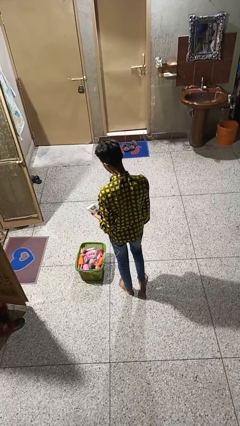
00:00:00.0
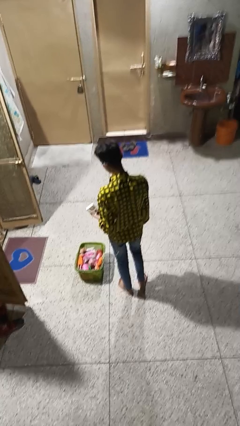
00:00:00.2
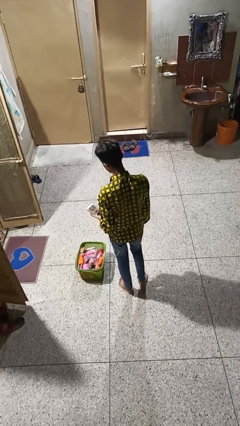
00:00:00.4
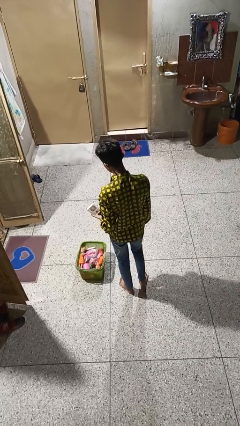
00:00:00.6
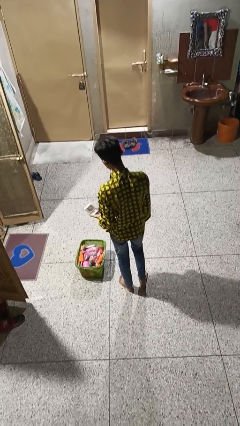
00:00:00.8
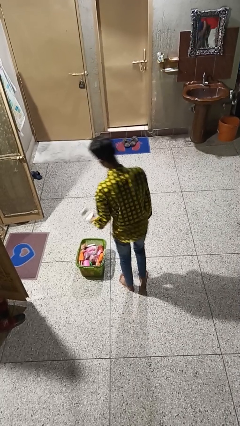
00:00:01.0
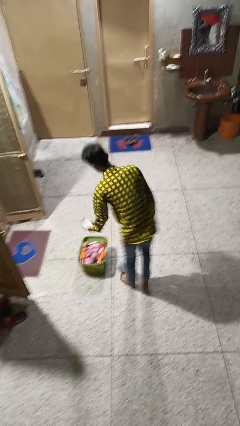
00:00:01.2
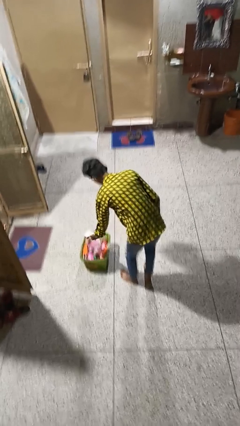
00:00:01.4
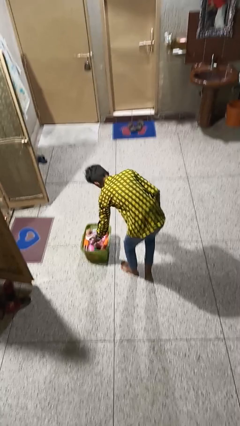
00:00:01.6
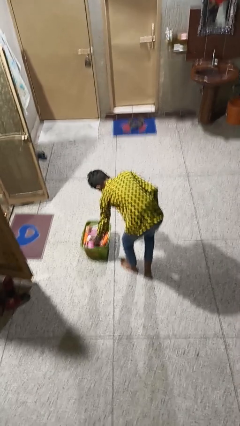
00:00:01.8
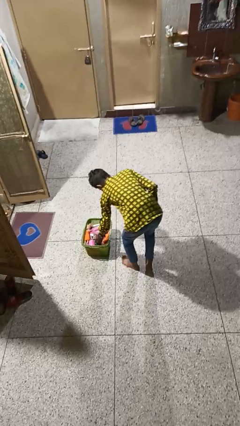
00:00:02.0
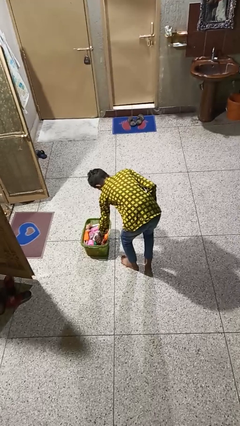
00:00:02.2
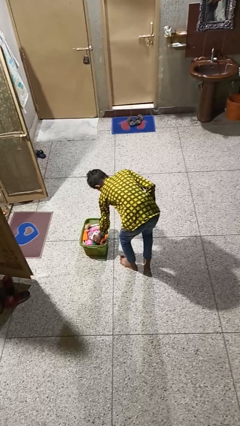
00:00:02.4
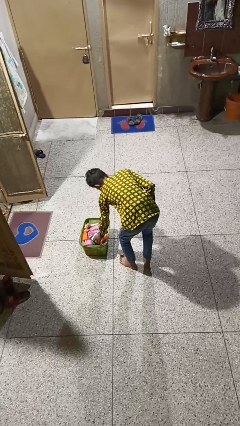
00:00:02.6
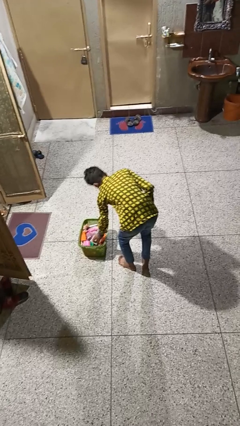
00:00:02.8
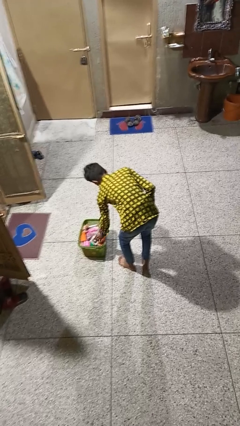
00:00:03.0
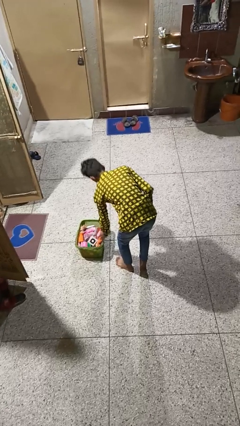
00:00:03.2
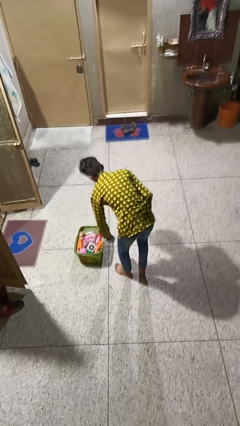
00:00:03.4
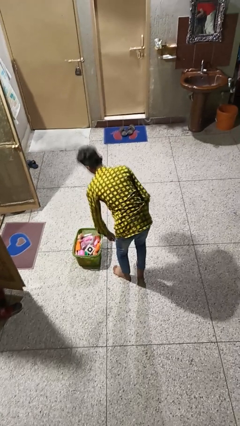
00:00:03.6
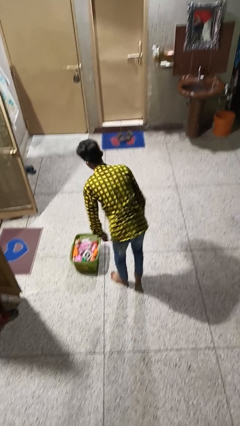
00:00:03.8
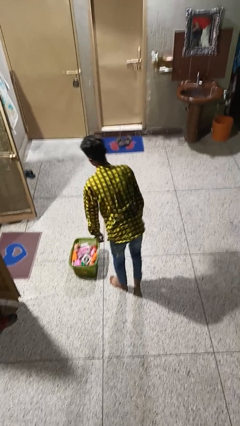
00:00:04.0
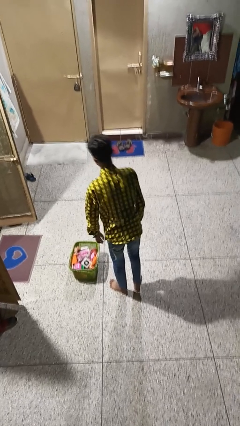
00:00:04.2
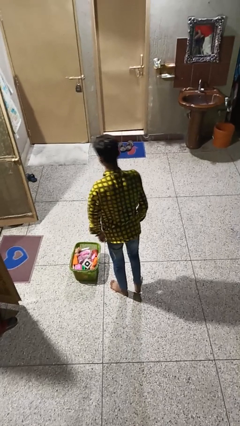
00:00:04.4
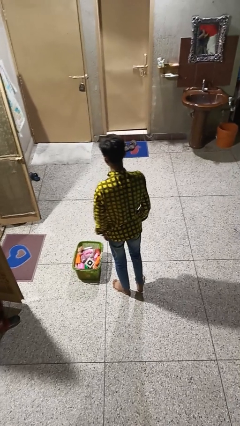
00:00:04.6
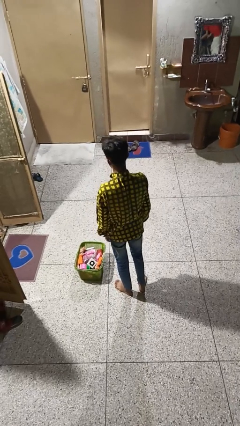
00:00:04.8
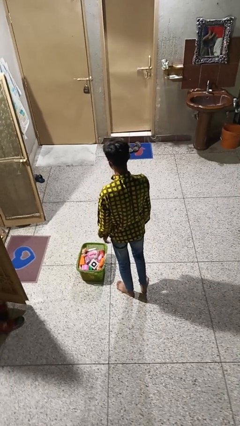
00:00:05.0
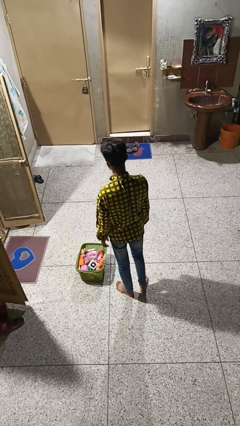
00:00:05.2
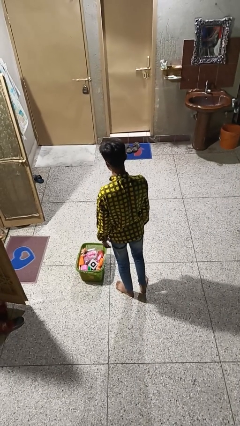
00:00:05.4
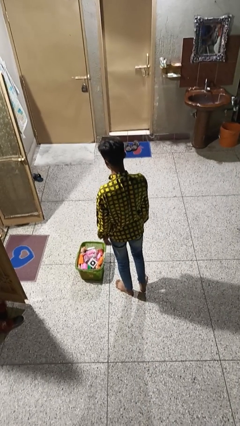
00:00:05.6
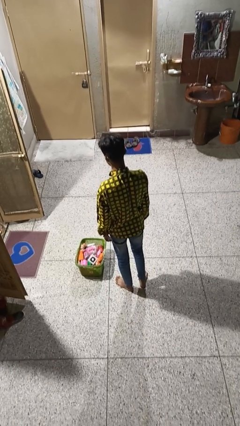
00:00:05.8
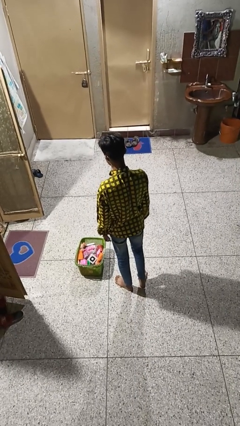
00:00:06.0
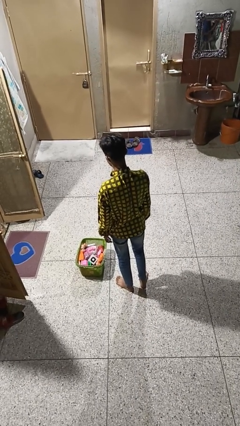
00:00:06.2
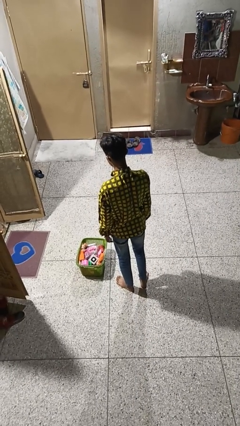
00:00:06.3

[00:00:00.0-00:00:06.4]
person takes object from basket

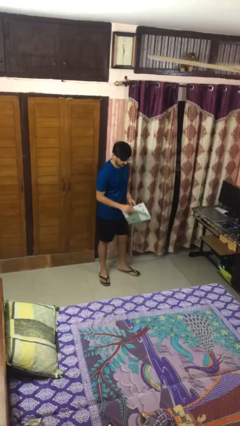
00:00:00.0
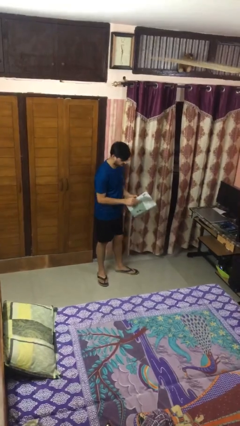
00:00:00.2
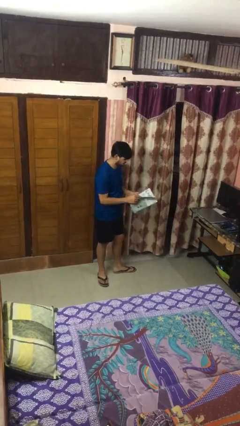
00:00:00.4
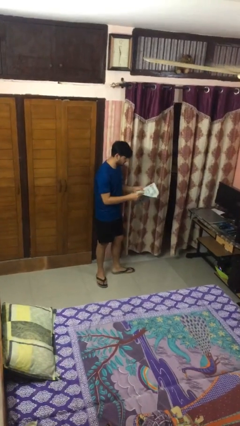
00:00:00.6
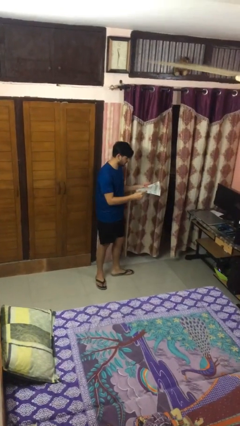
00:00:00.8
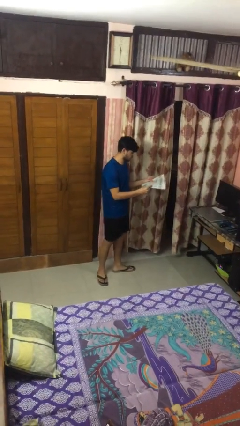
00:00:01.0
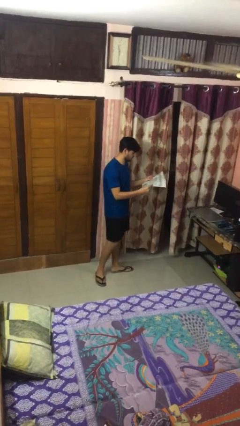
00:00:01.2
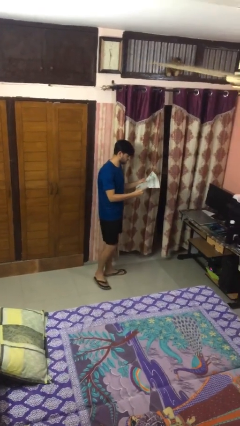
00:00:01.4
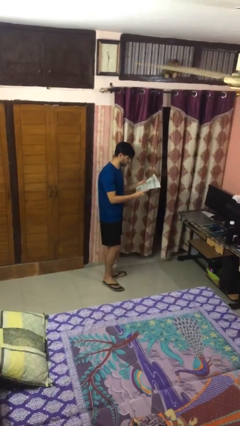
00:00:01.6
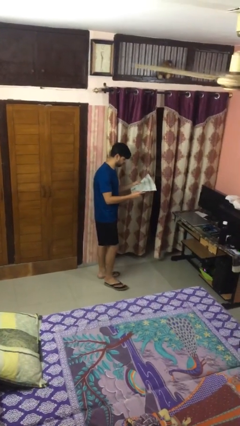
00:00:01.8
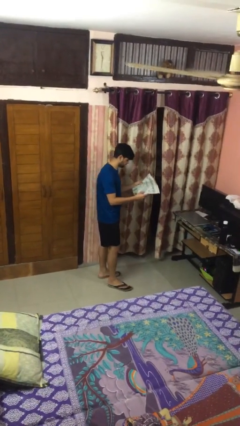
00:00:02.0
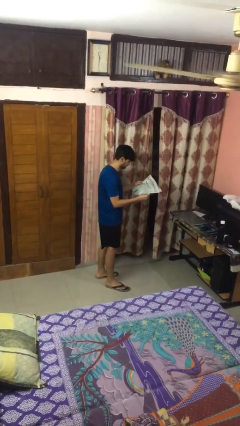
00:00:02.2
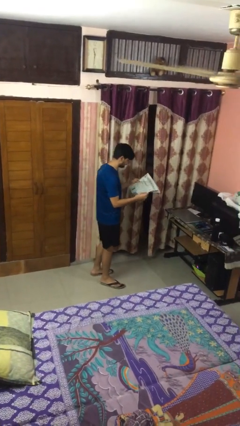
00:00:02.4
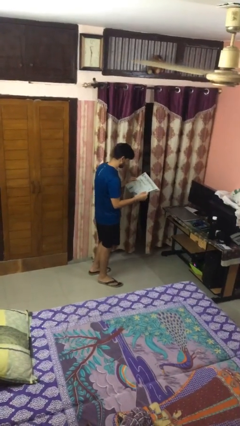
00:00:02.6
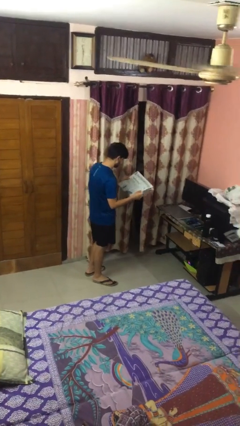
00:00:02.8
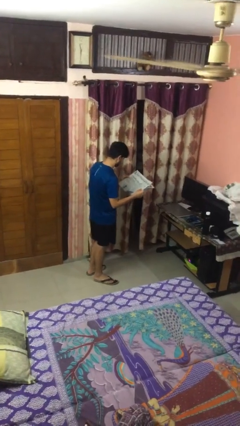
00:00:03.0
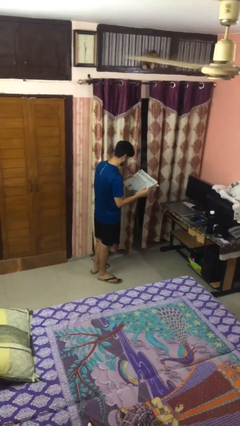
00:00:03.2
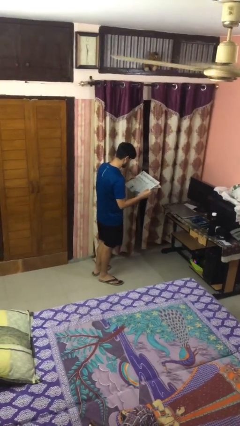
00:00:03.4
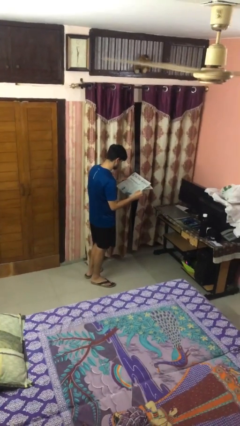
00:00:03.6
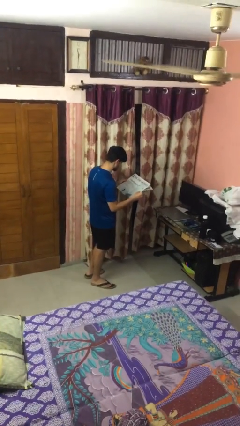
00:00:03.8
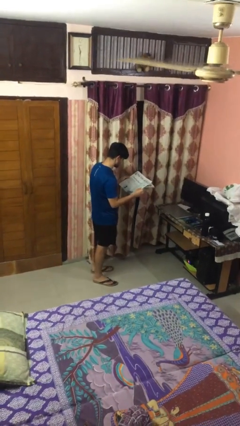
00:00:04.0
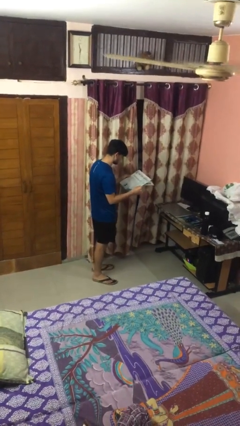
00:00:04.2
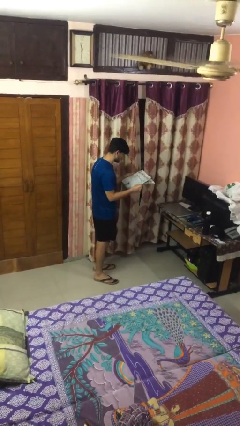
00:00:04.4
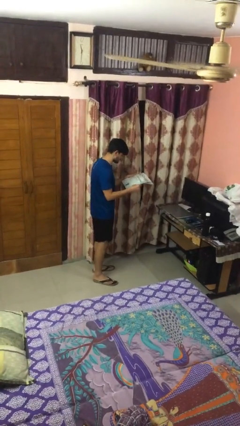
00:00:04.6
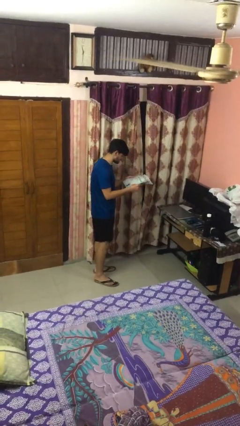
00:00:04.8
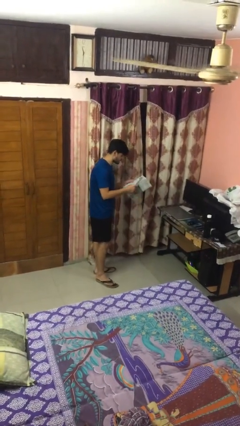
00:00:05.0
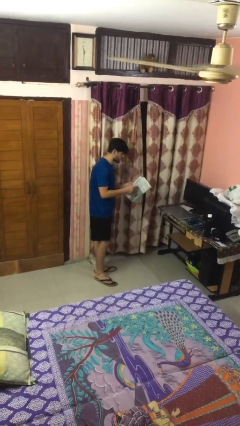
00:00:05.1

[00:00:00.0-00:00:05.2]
person reads newspaper

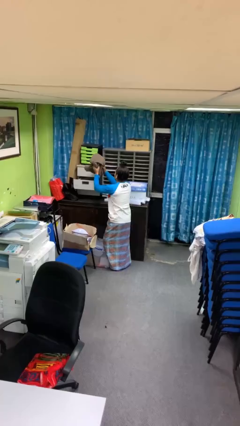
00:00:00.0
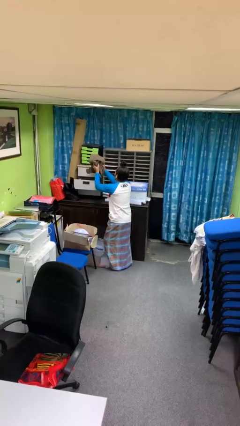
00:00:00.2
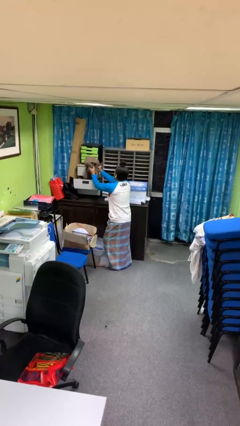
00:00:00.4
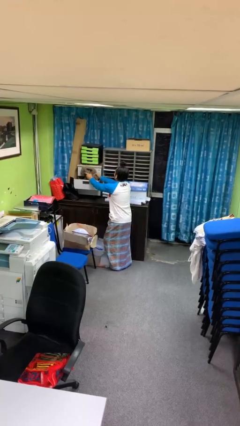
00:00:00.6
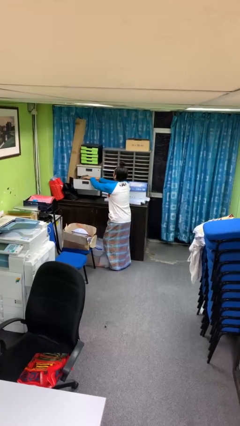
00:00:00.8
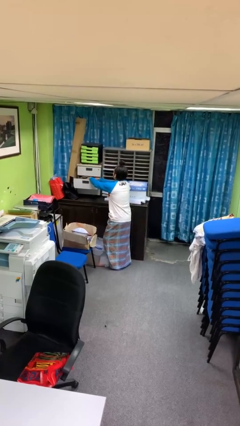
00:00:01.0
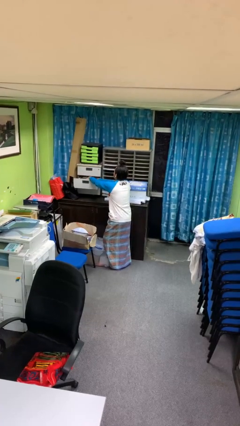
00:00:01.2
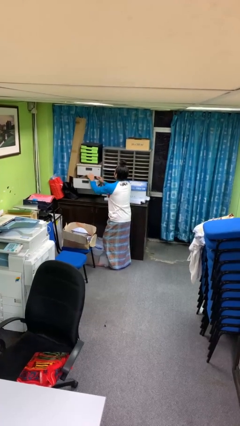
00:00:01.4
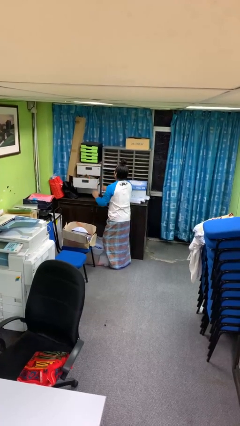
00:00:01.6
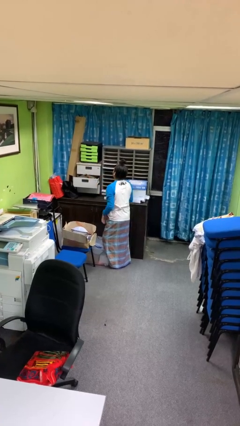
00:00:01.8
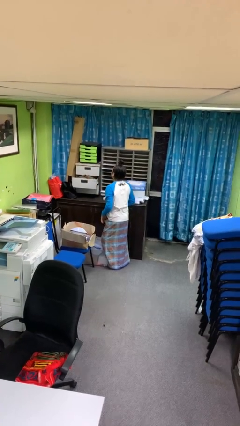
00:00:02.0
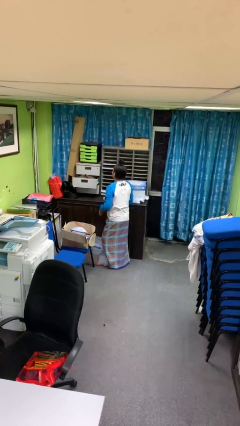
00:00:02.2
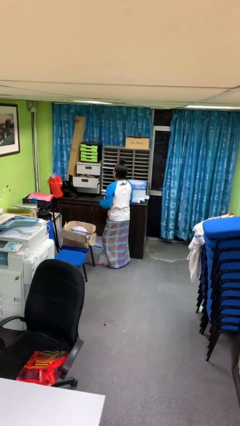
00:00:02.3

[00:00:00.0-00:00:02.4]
person puts clothes into dresser

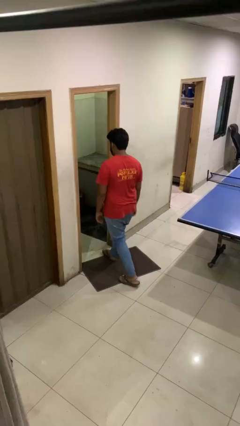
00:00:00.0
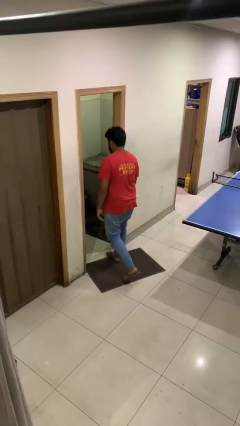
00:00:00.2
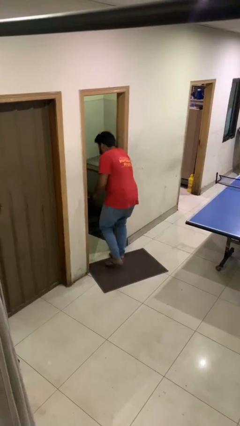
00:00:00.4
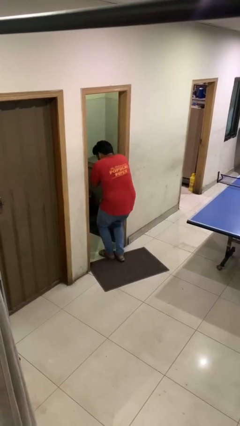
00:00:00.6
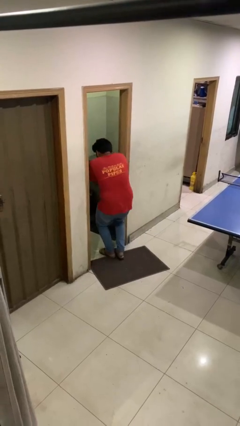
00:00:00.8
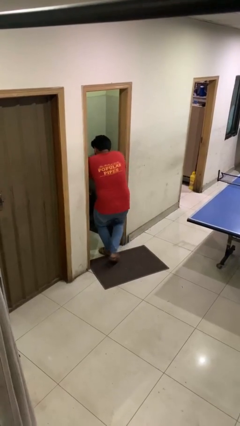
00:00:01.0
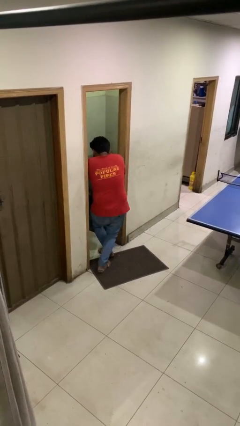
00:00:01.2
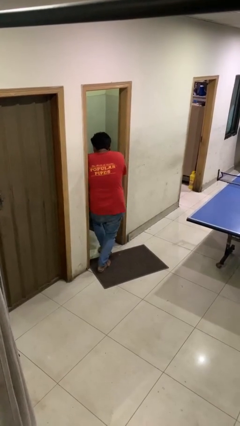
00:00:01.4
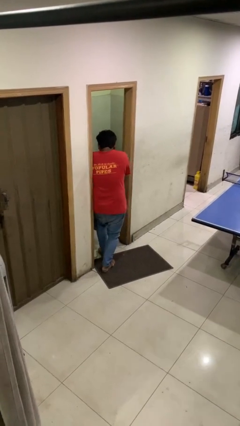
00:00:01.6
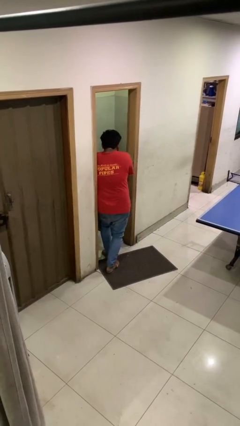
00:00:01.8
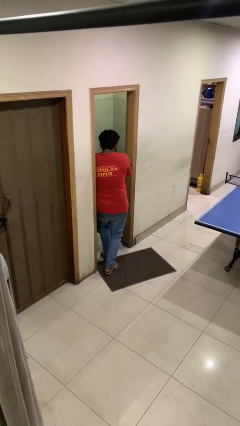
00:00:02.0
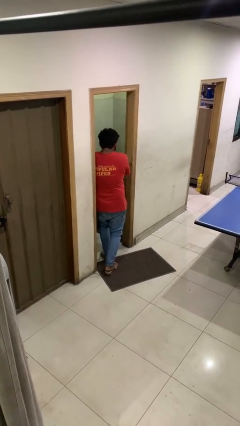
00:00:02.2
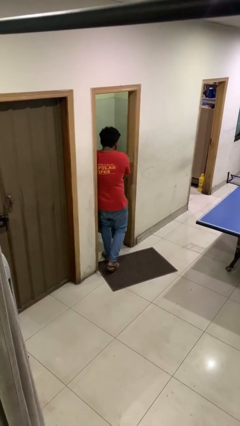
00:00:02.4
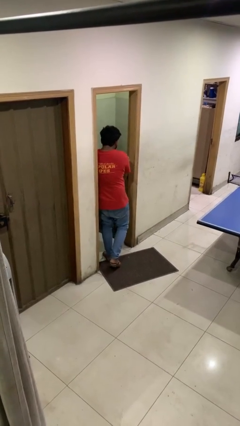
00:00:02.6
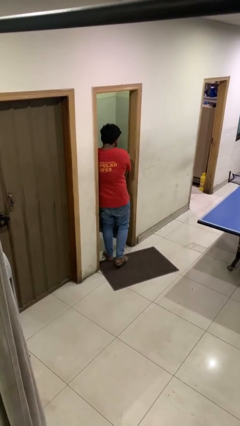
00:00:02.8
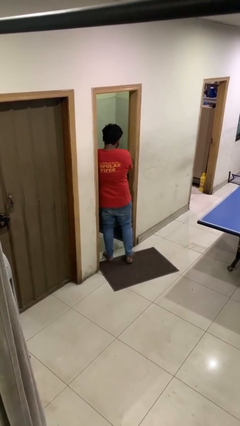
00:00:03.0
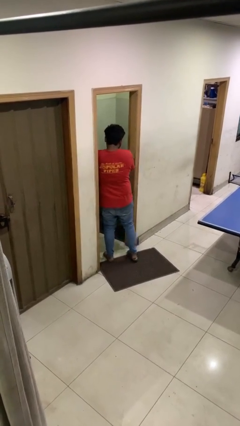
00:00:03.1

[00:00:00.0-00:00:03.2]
person bumps into wall

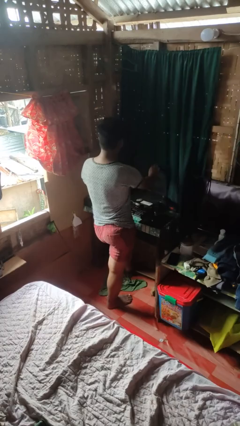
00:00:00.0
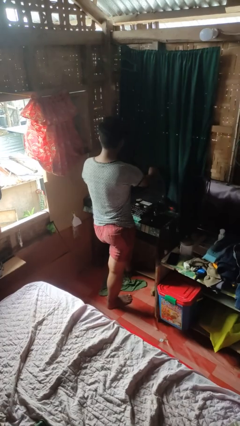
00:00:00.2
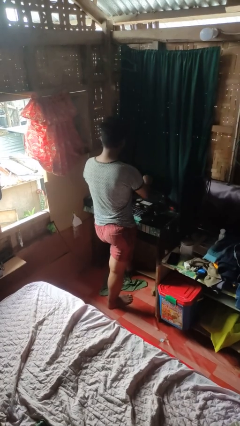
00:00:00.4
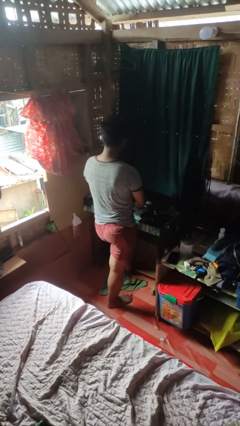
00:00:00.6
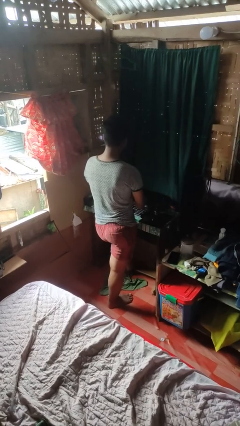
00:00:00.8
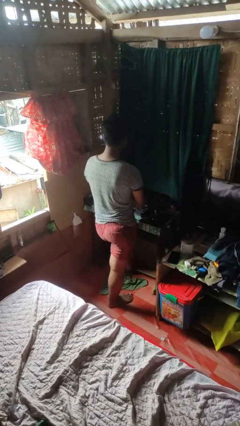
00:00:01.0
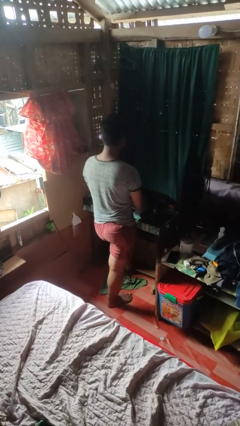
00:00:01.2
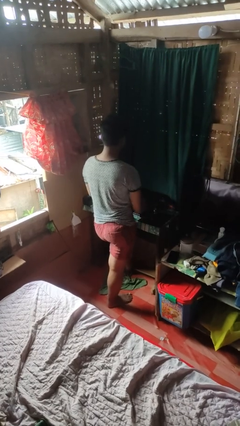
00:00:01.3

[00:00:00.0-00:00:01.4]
person closes laptop
